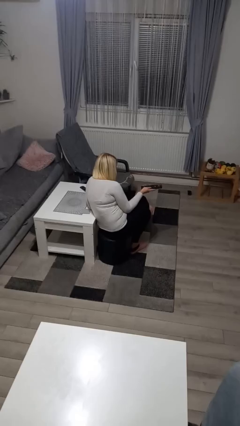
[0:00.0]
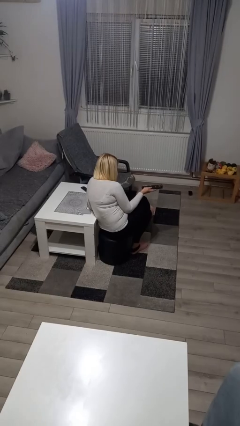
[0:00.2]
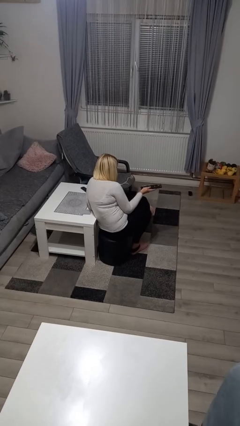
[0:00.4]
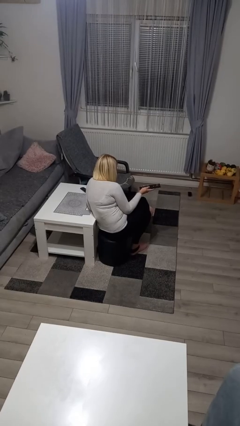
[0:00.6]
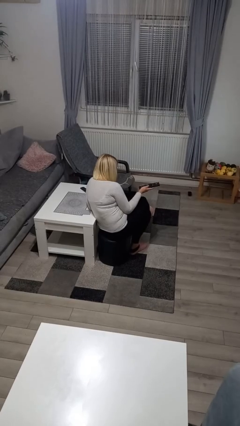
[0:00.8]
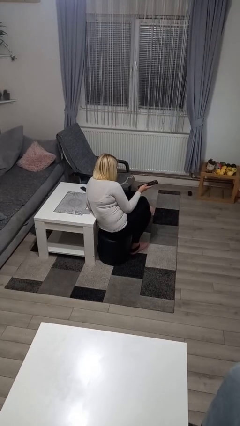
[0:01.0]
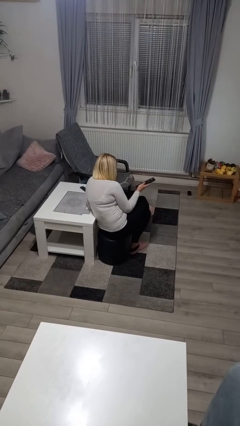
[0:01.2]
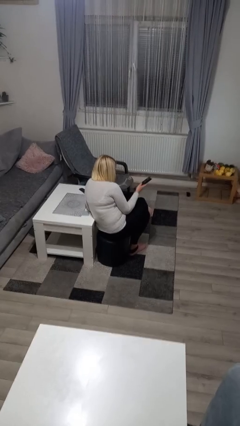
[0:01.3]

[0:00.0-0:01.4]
person uses television remote

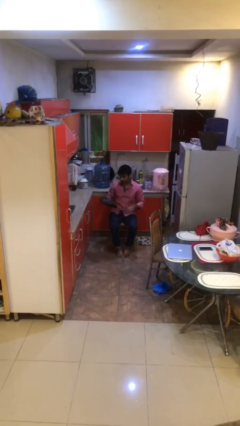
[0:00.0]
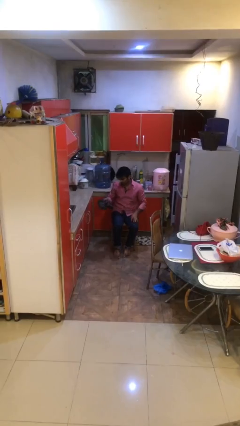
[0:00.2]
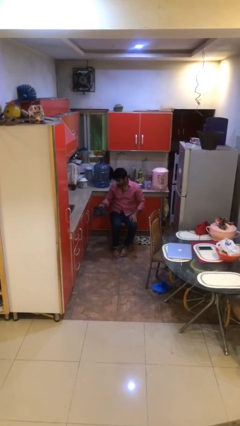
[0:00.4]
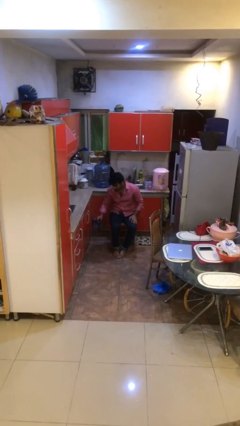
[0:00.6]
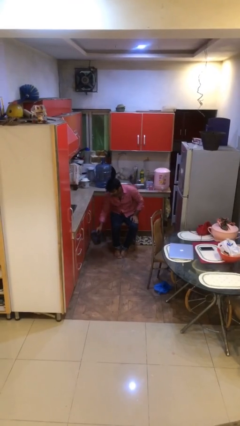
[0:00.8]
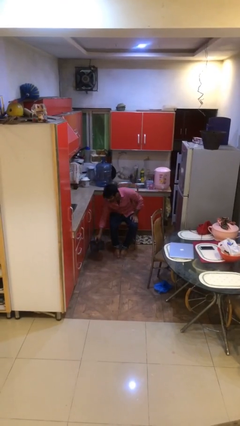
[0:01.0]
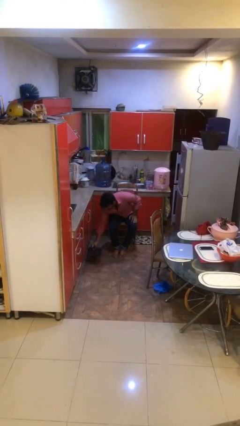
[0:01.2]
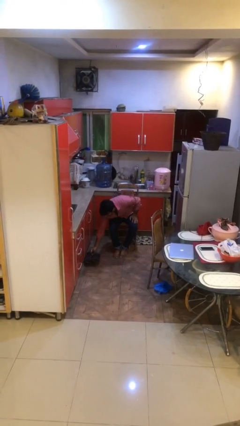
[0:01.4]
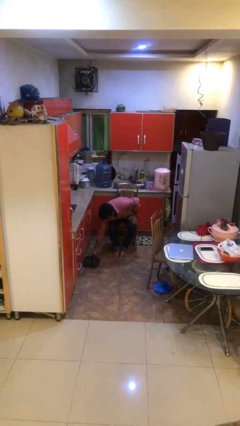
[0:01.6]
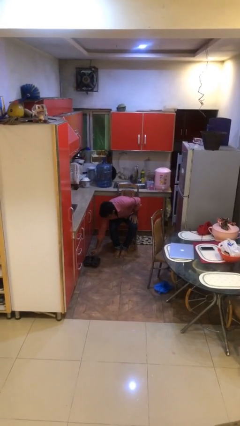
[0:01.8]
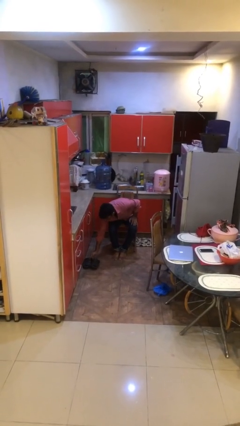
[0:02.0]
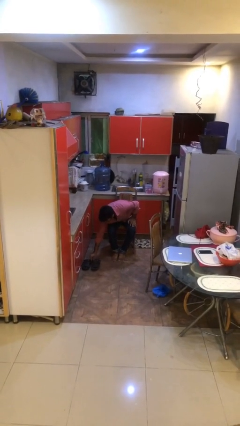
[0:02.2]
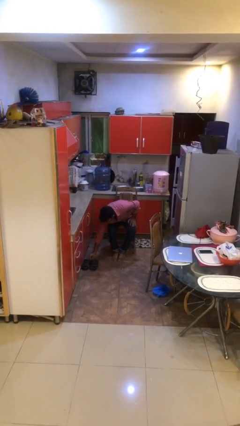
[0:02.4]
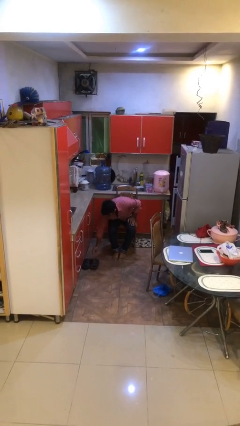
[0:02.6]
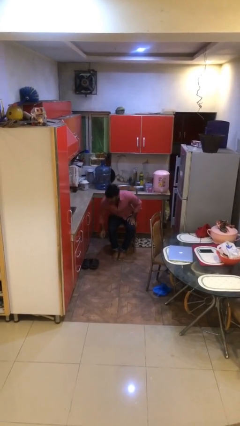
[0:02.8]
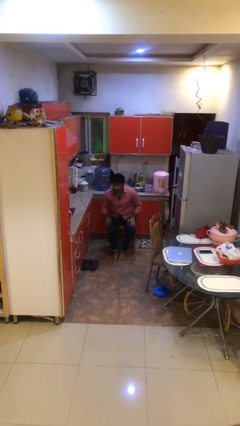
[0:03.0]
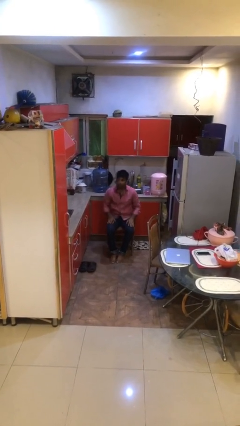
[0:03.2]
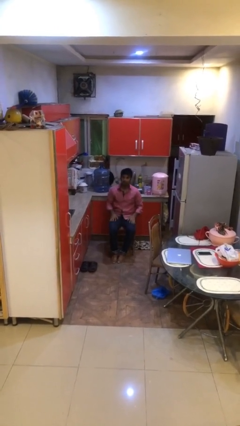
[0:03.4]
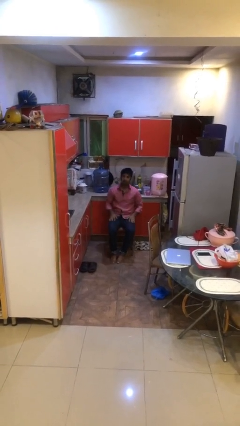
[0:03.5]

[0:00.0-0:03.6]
person puts down object on floor

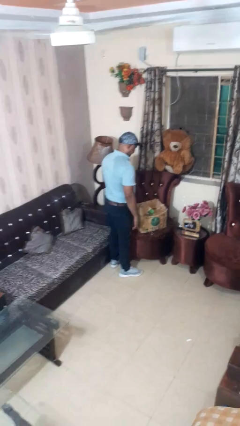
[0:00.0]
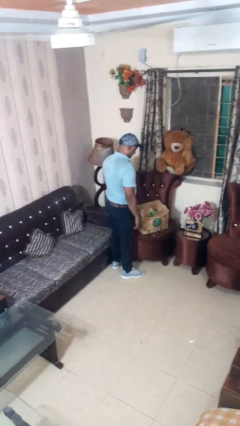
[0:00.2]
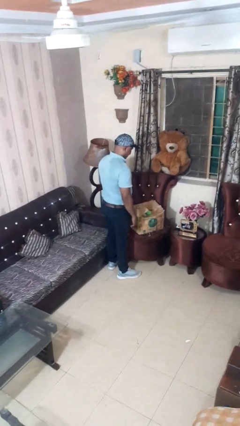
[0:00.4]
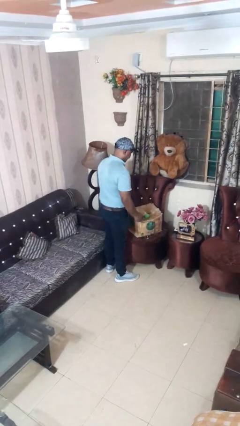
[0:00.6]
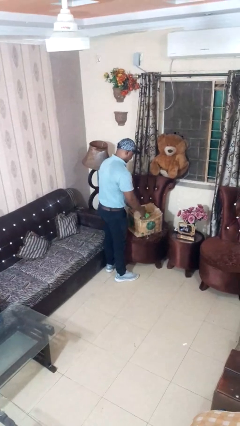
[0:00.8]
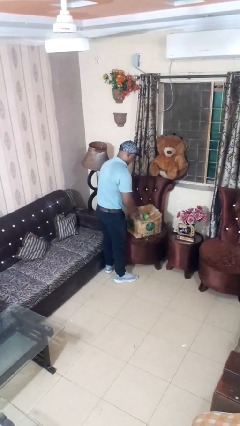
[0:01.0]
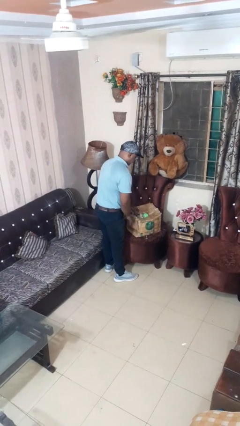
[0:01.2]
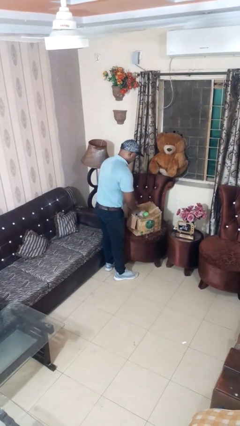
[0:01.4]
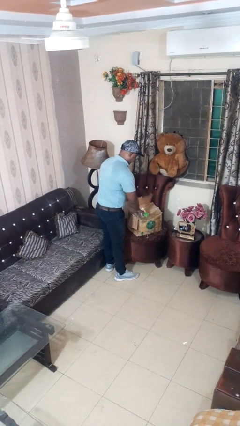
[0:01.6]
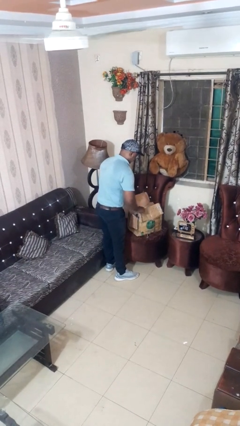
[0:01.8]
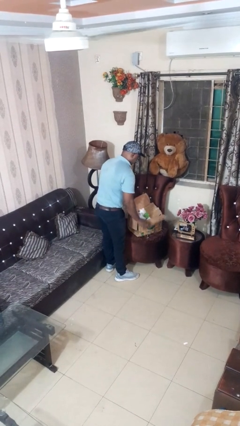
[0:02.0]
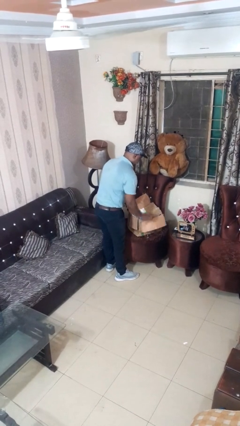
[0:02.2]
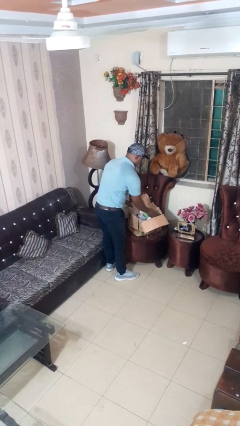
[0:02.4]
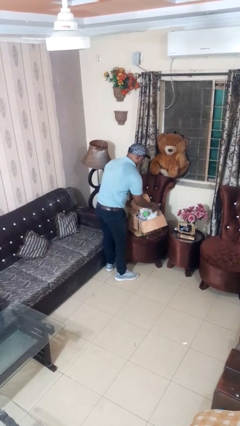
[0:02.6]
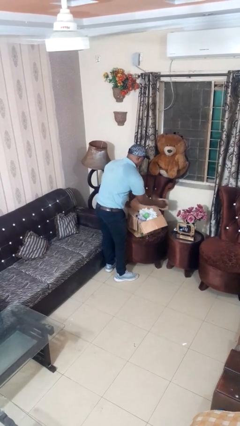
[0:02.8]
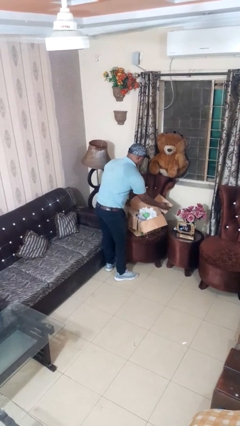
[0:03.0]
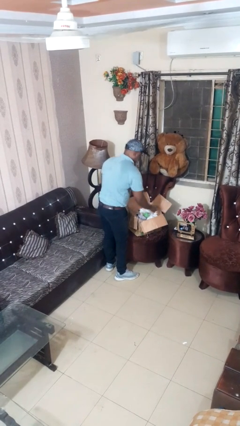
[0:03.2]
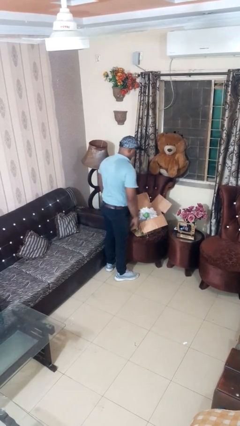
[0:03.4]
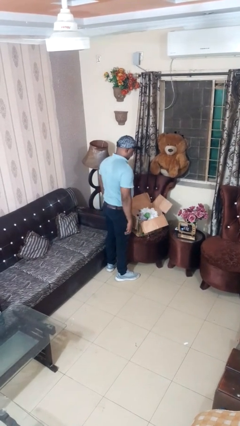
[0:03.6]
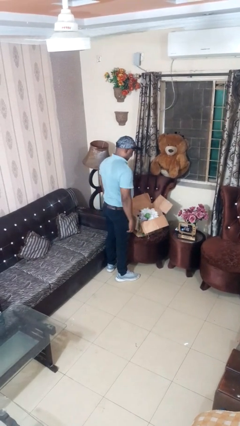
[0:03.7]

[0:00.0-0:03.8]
person opens box

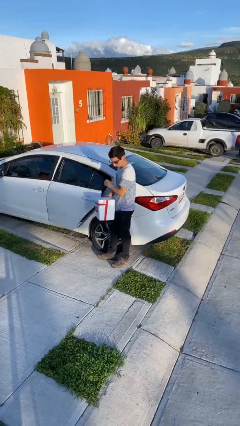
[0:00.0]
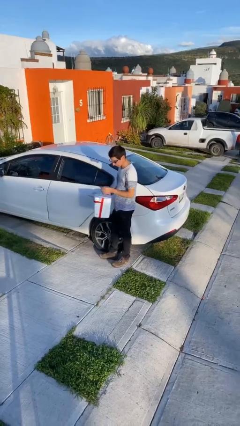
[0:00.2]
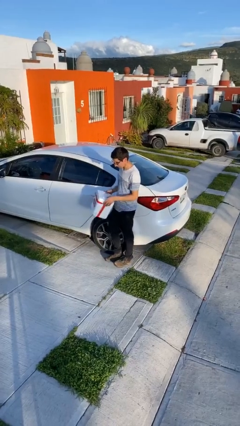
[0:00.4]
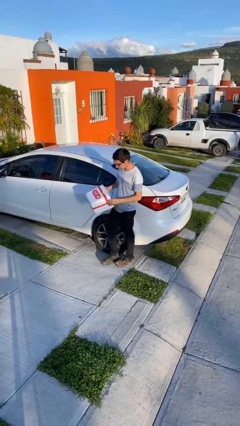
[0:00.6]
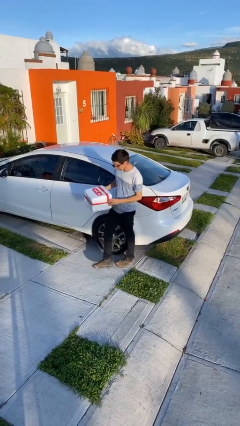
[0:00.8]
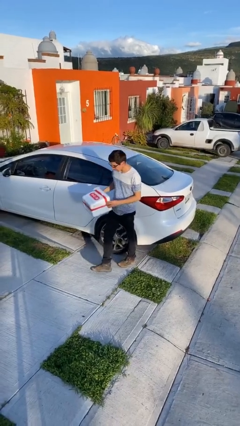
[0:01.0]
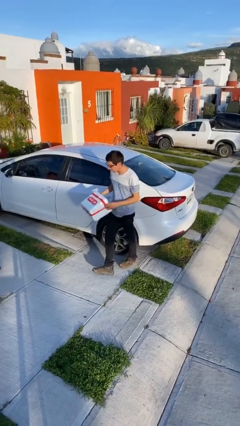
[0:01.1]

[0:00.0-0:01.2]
person closes car door

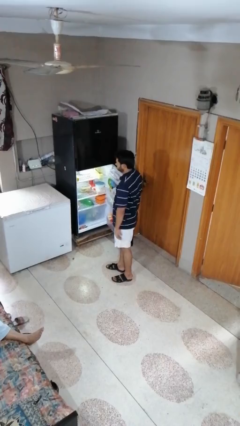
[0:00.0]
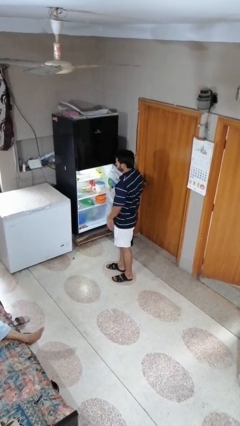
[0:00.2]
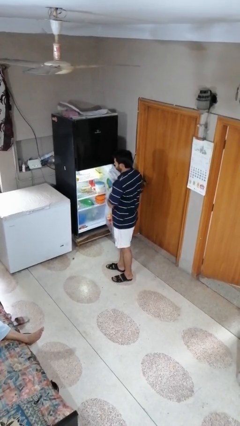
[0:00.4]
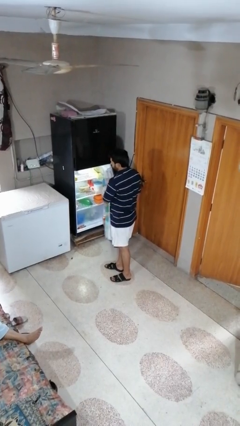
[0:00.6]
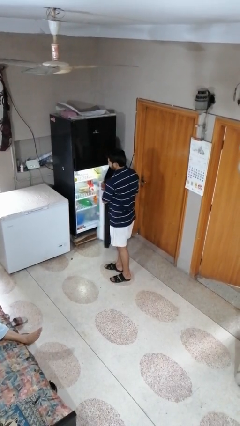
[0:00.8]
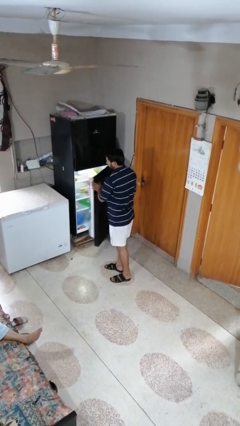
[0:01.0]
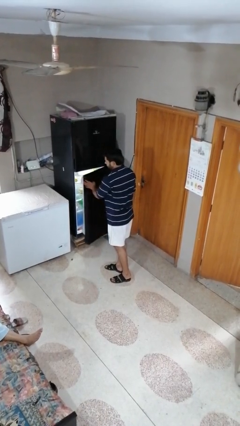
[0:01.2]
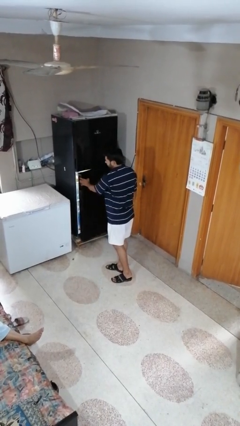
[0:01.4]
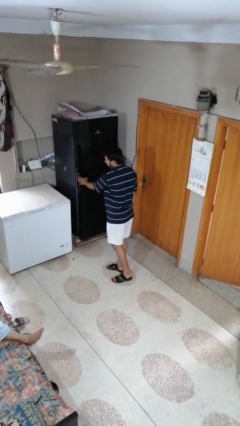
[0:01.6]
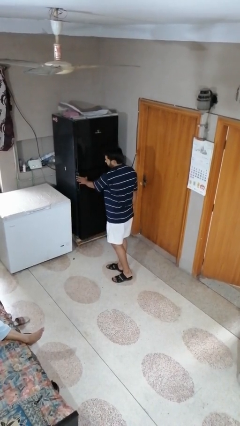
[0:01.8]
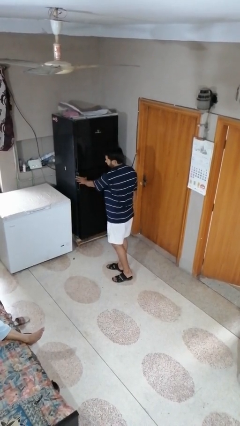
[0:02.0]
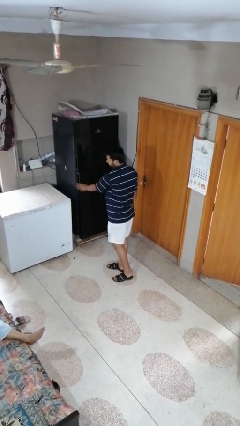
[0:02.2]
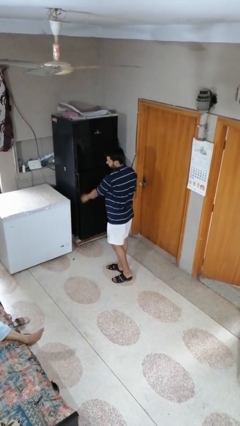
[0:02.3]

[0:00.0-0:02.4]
person closes refrigerator

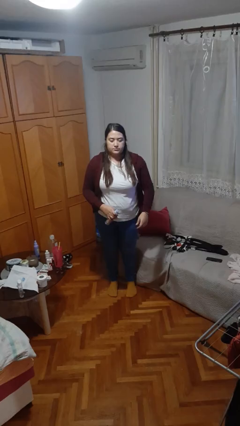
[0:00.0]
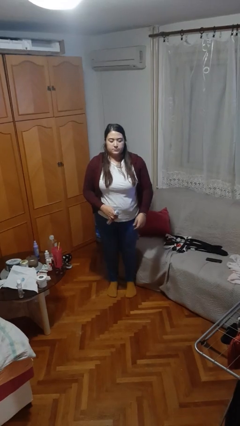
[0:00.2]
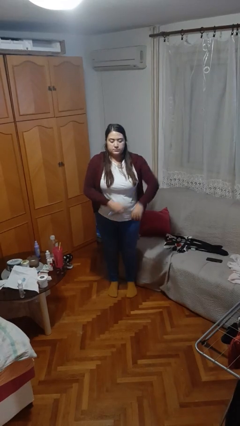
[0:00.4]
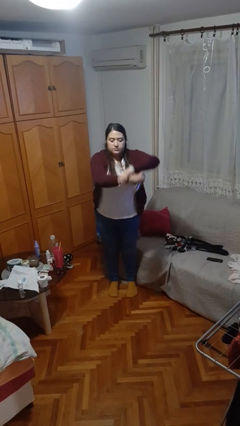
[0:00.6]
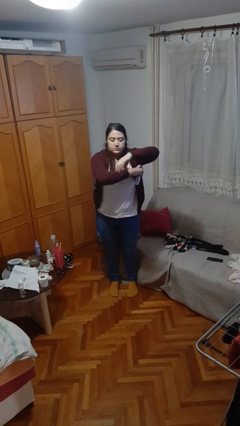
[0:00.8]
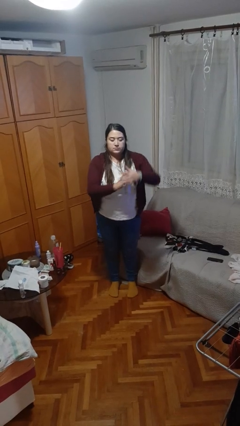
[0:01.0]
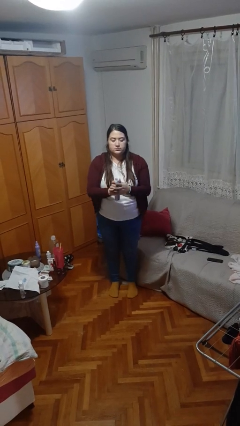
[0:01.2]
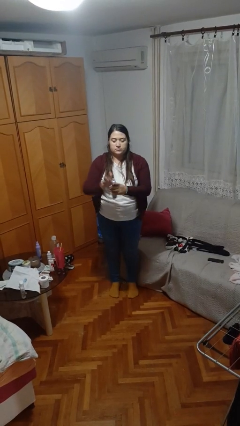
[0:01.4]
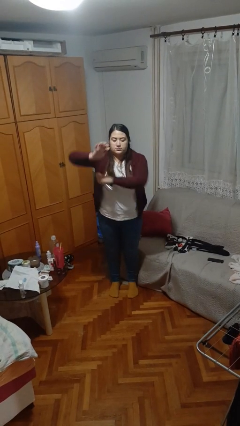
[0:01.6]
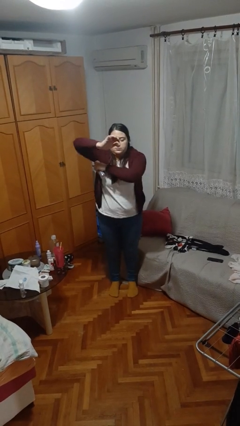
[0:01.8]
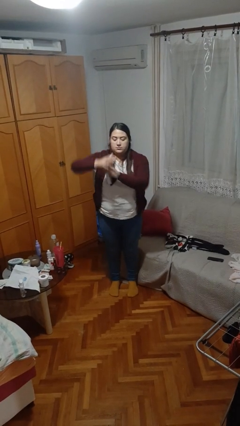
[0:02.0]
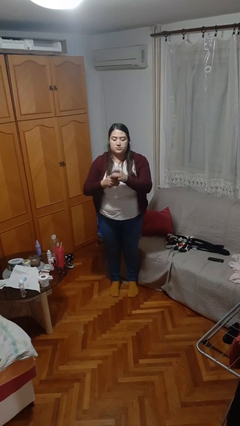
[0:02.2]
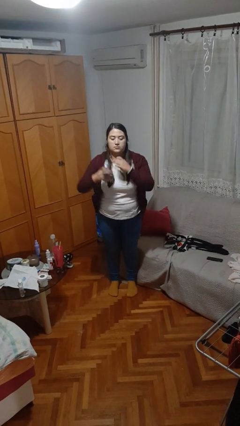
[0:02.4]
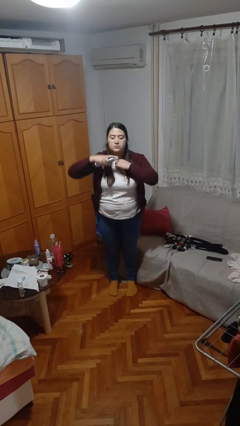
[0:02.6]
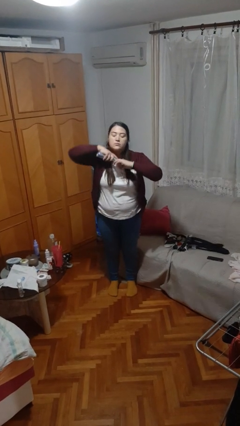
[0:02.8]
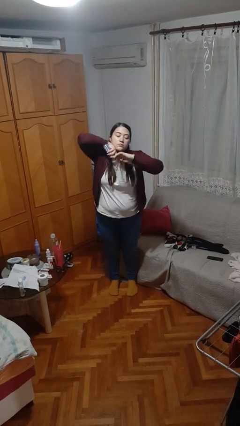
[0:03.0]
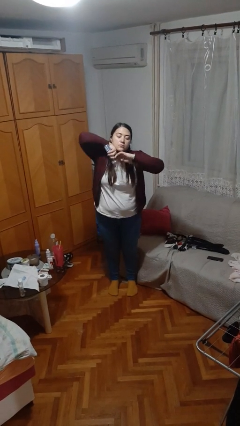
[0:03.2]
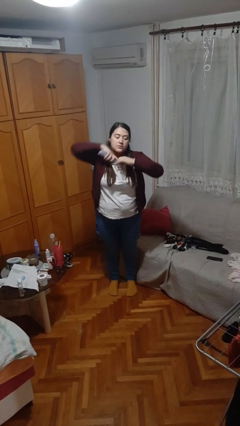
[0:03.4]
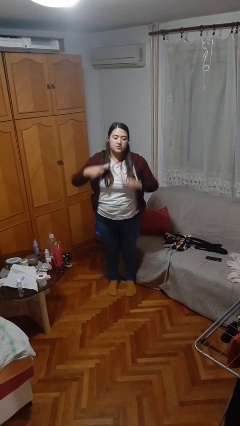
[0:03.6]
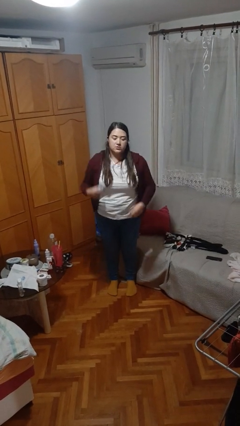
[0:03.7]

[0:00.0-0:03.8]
person applies deodorant

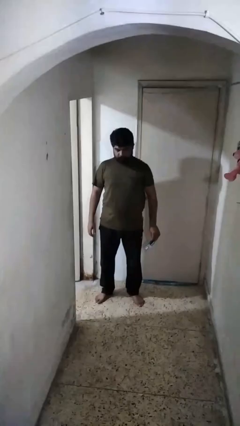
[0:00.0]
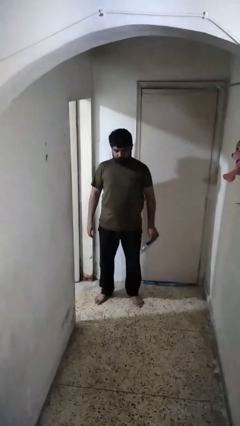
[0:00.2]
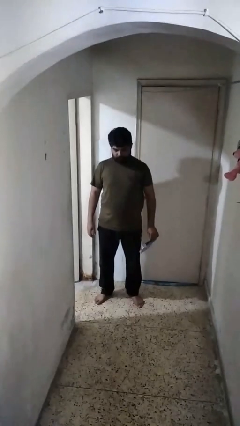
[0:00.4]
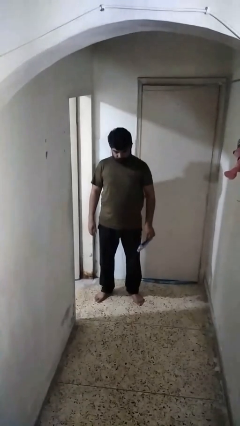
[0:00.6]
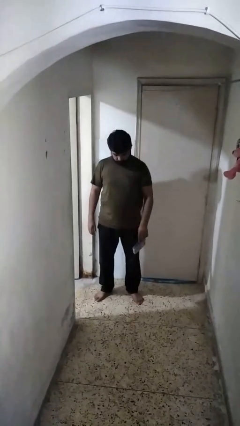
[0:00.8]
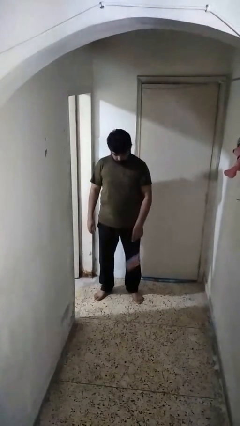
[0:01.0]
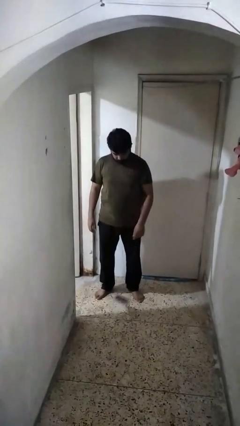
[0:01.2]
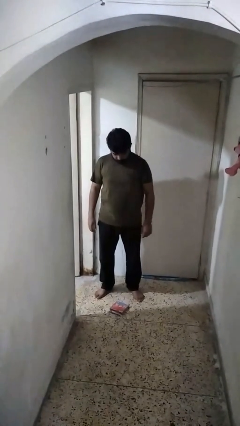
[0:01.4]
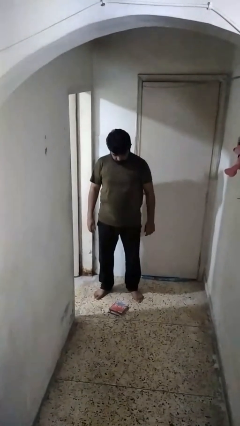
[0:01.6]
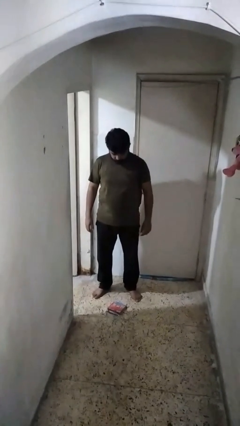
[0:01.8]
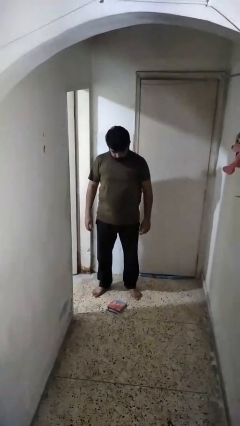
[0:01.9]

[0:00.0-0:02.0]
person throws object to ground
